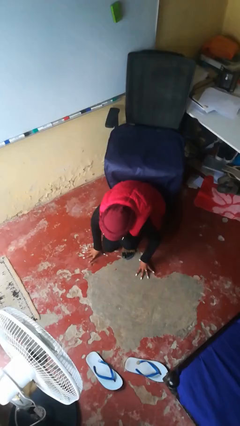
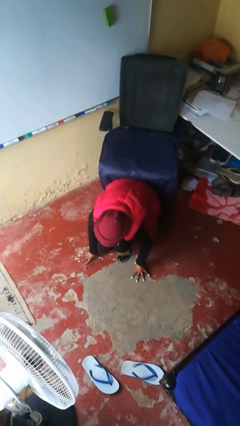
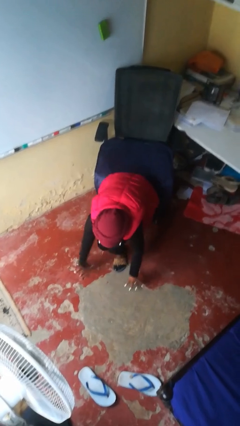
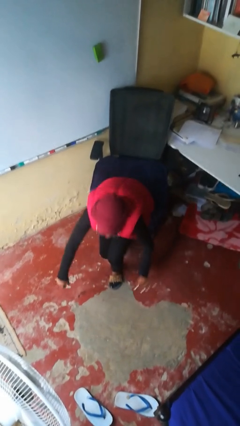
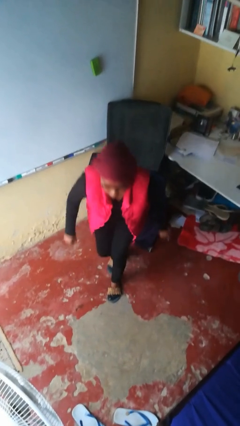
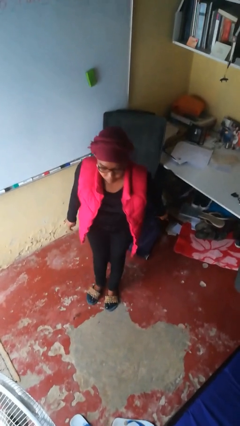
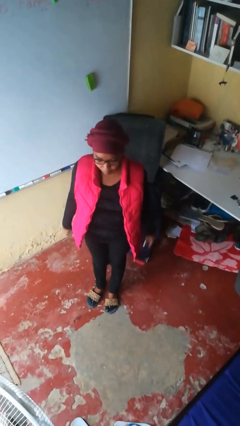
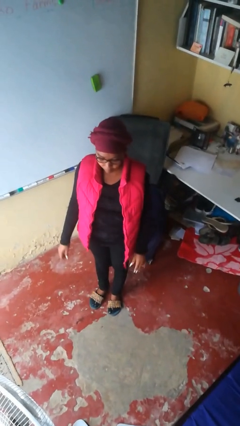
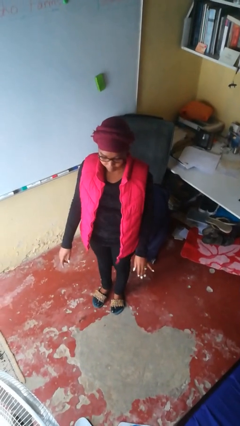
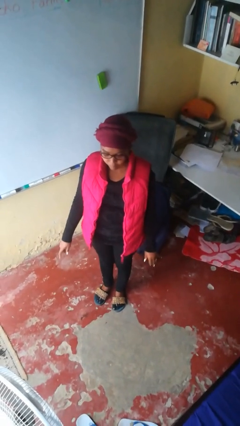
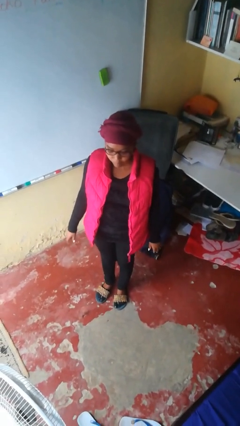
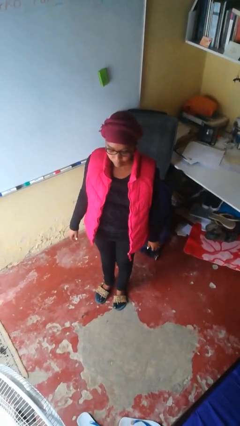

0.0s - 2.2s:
person stands up from floor

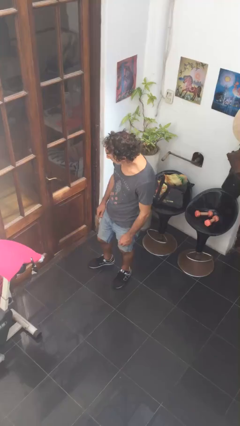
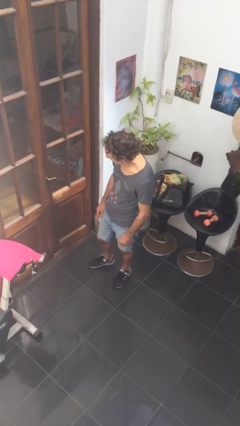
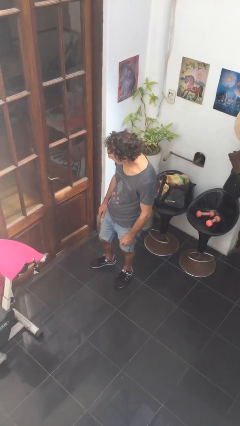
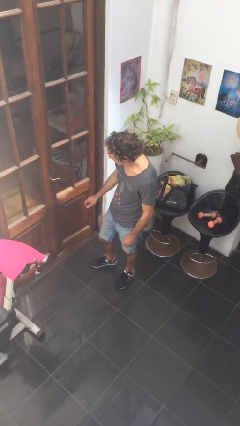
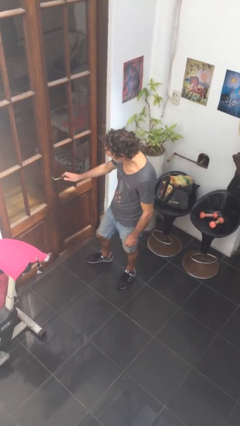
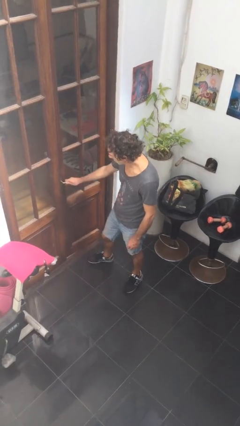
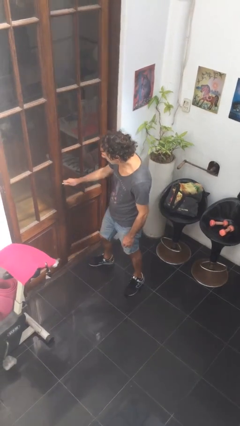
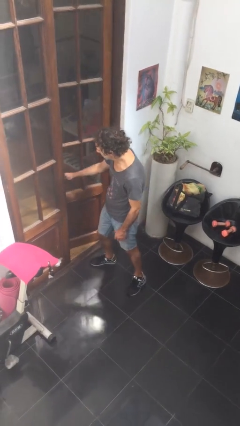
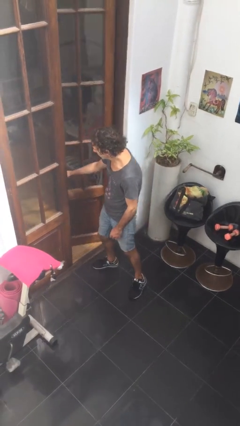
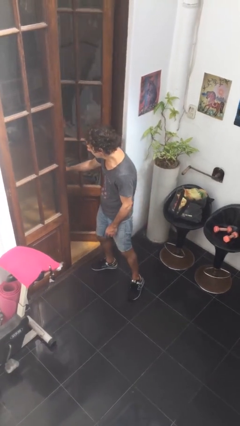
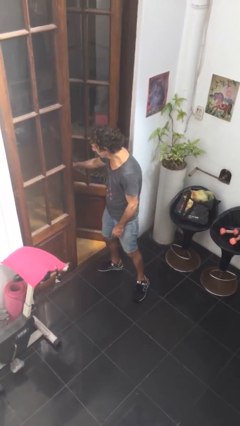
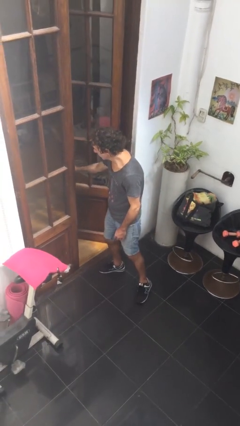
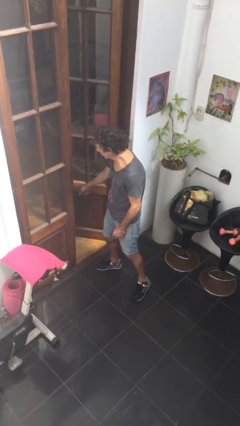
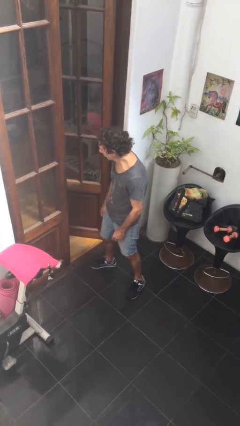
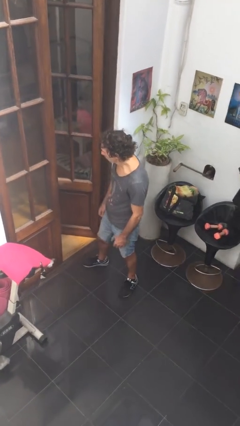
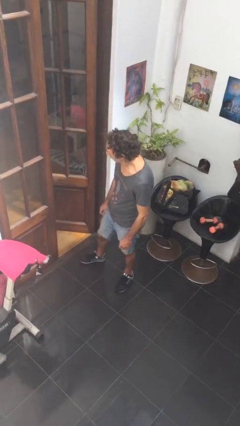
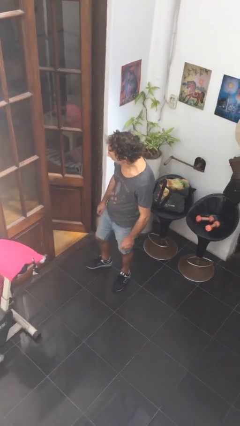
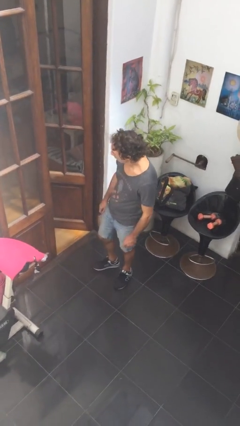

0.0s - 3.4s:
person opens facility door

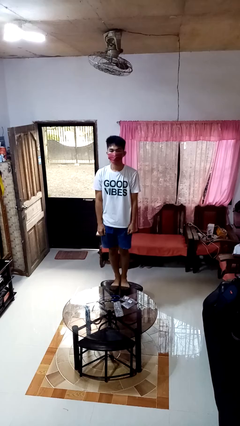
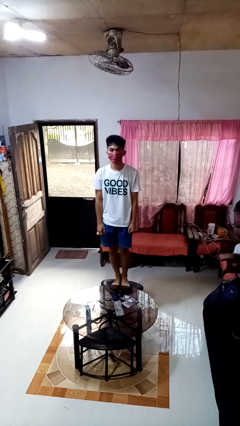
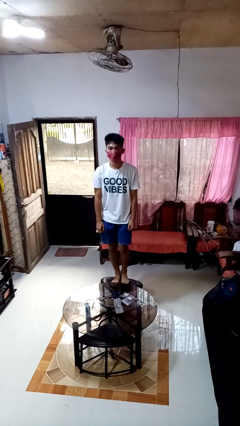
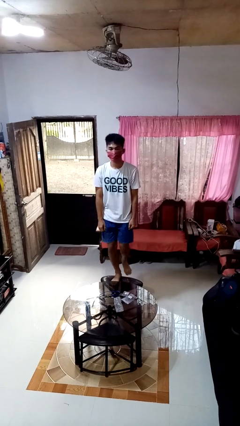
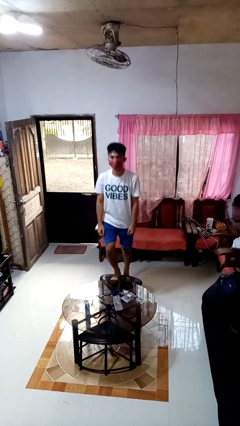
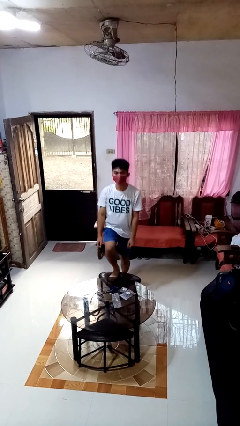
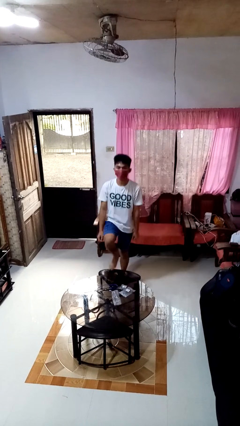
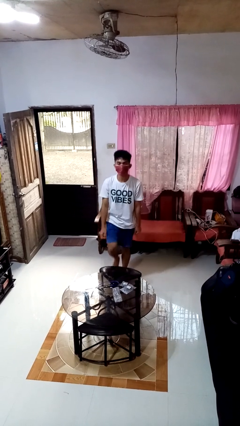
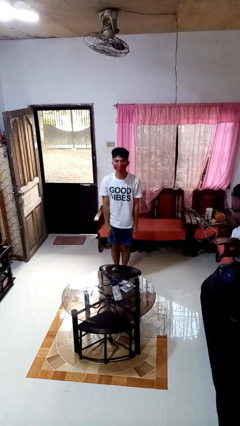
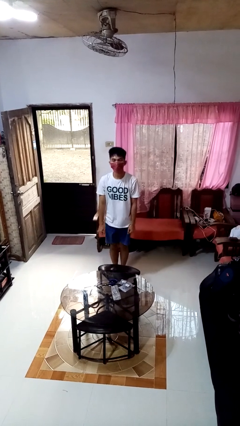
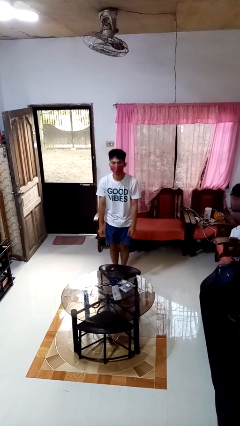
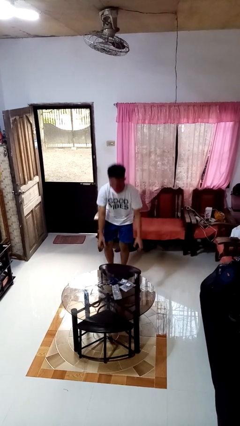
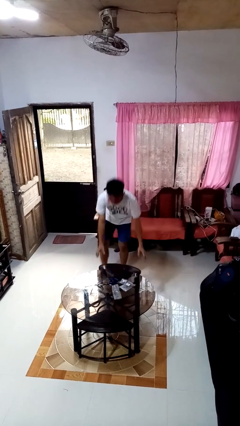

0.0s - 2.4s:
person climbs off chair

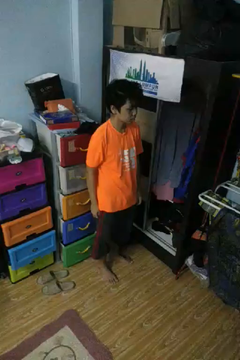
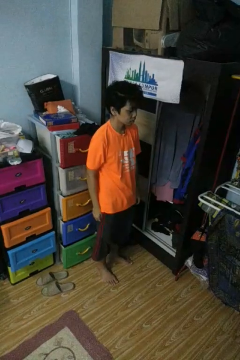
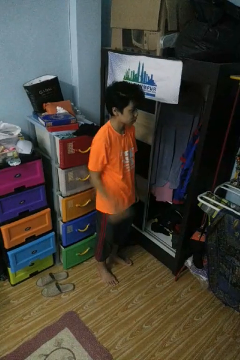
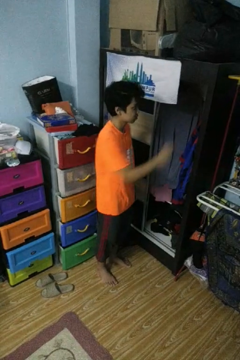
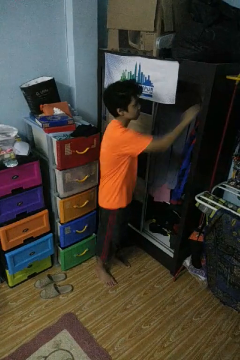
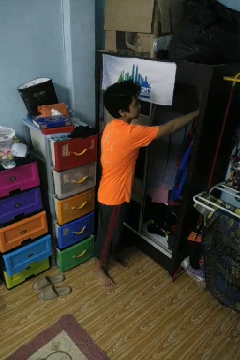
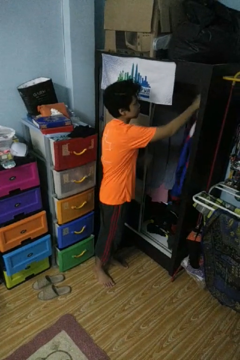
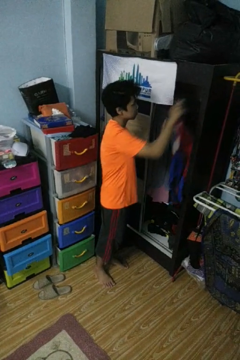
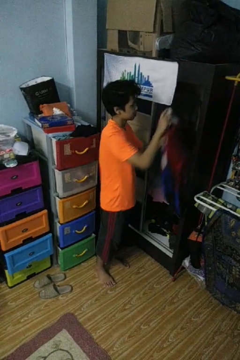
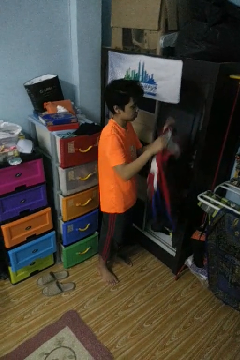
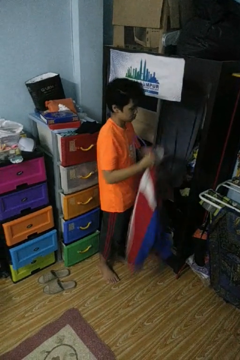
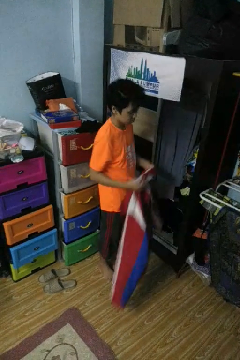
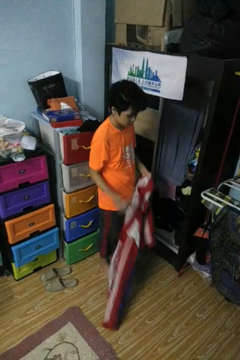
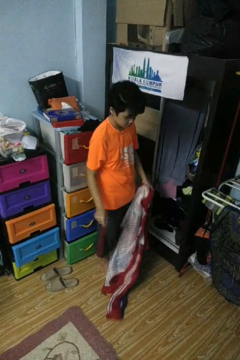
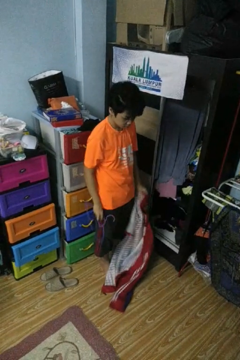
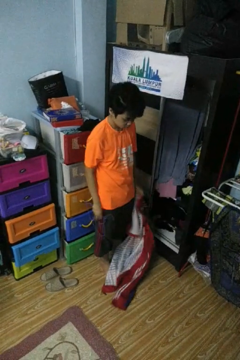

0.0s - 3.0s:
person takes clothes from closet

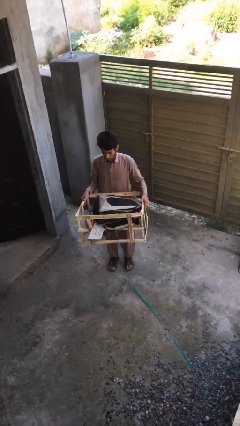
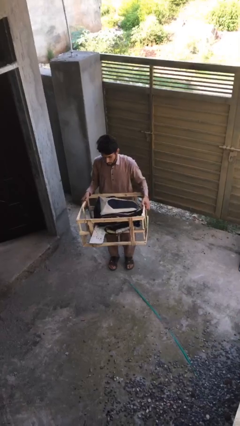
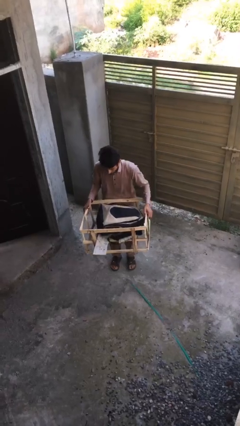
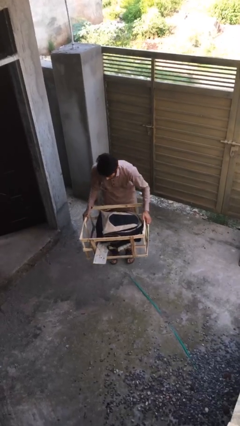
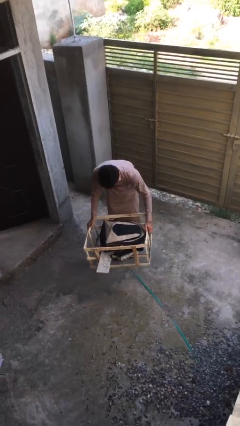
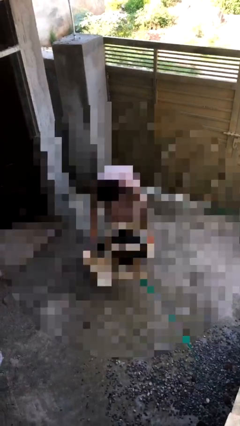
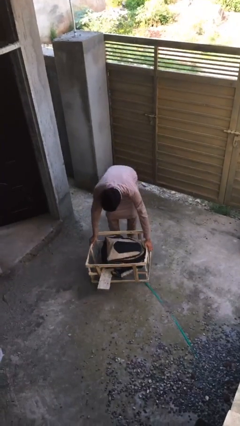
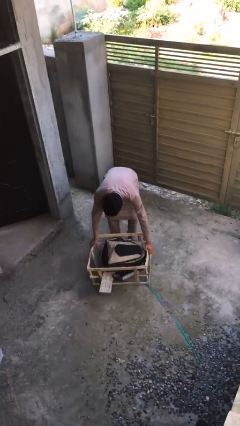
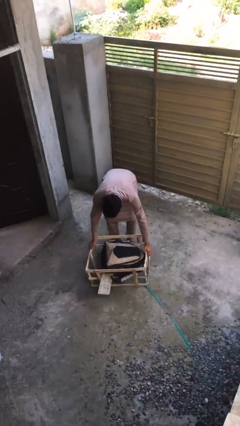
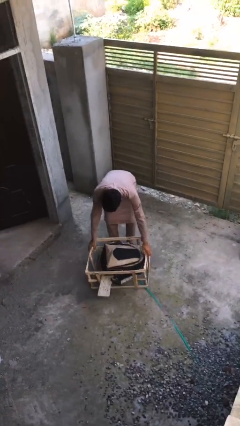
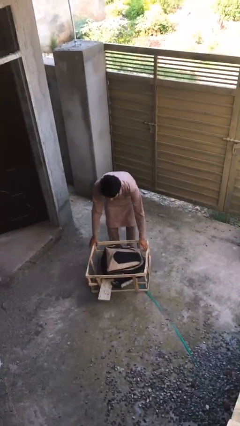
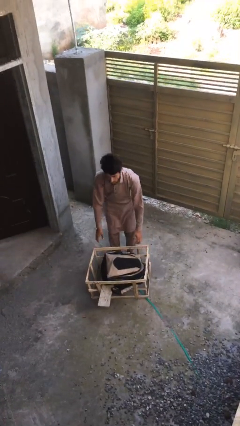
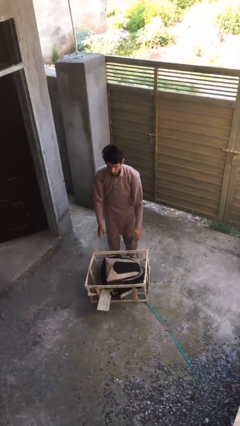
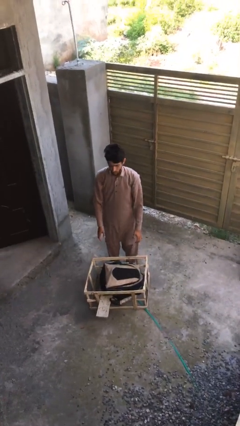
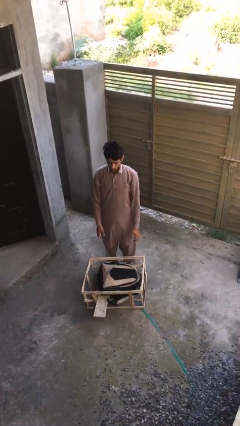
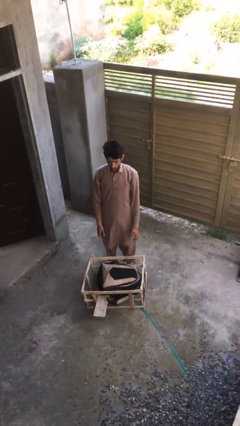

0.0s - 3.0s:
person puts down object on floor

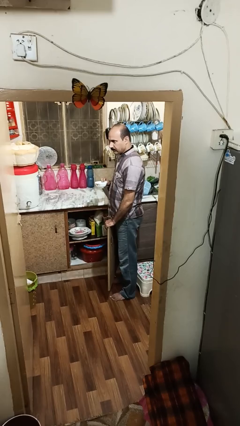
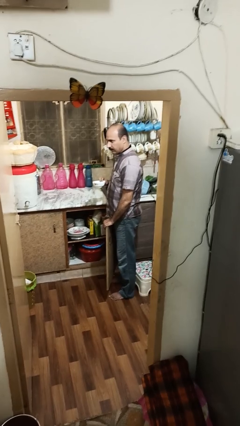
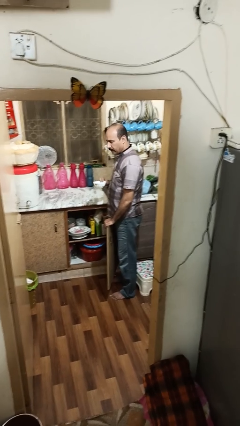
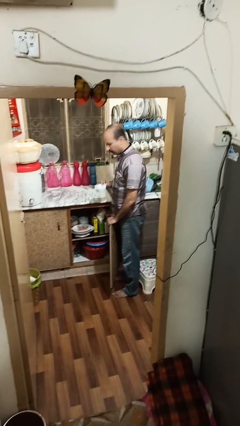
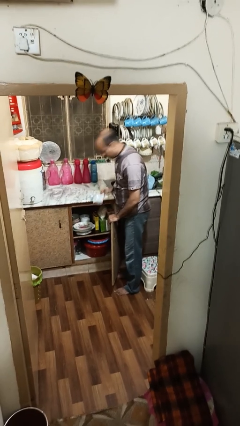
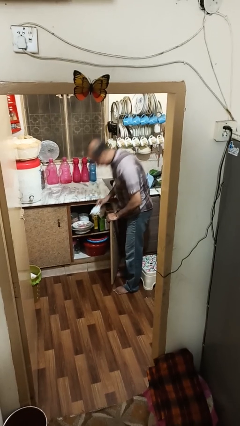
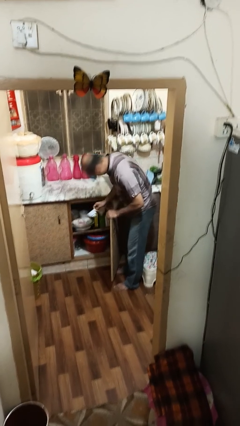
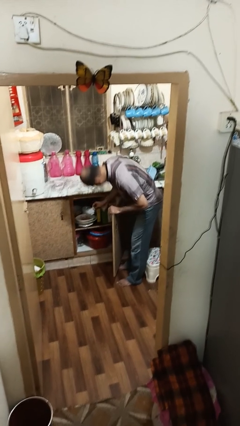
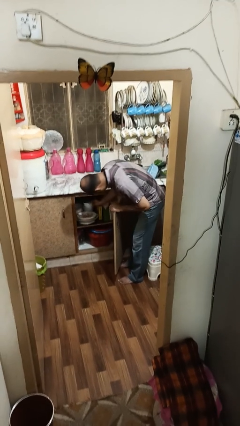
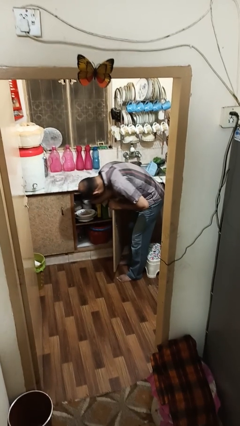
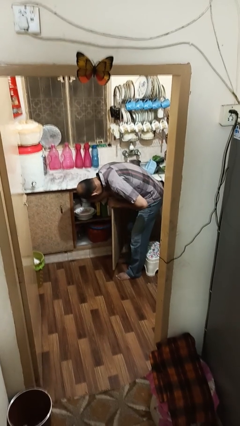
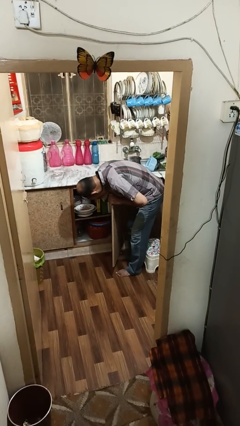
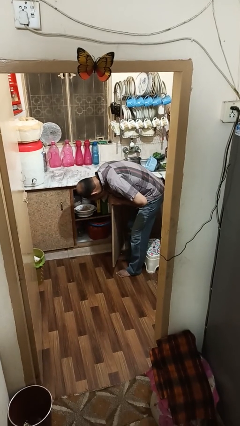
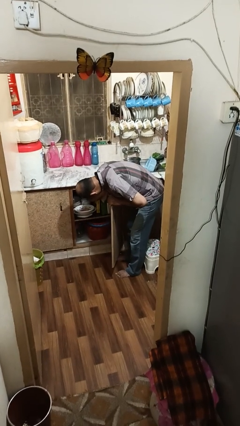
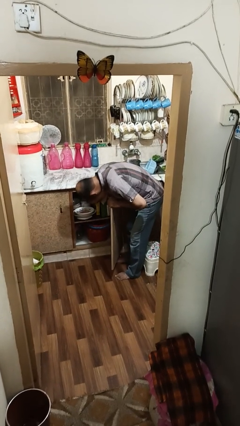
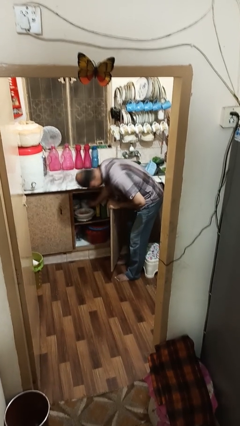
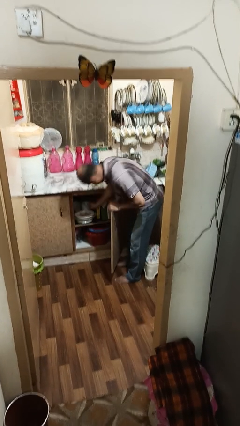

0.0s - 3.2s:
person puts object in cabinet
